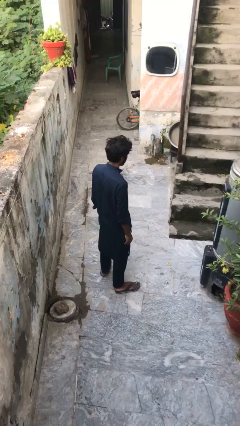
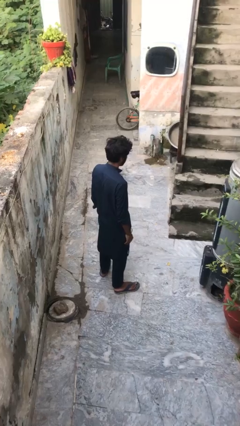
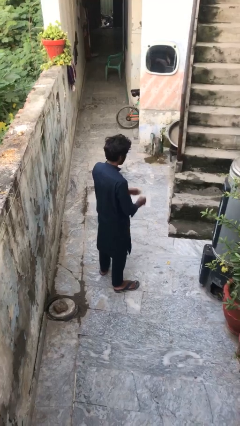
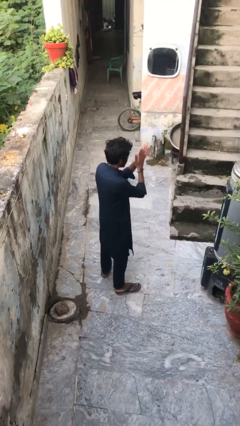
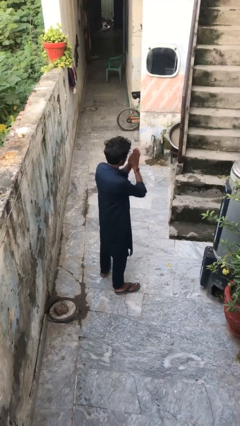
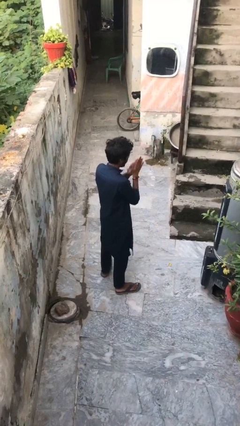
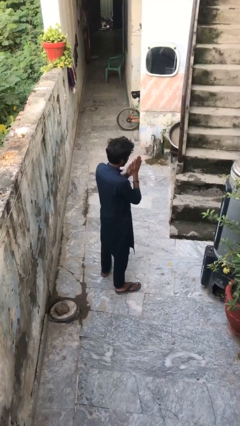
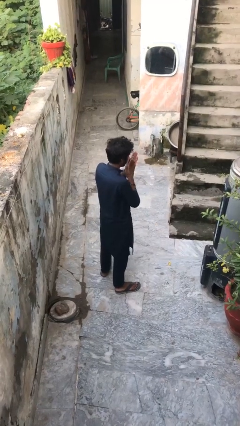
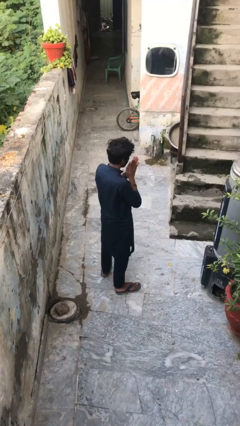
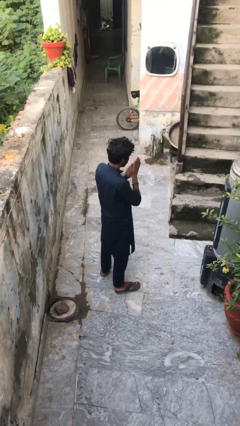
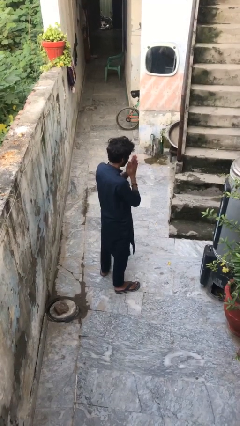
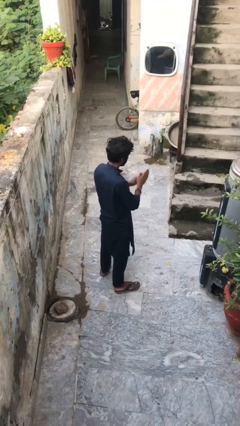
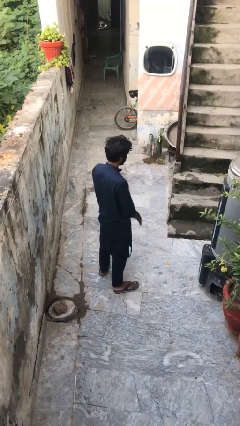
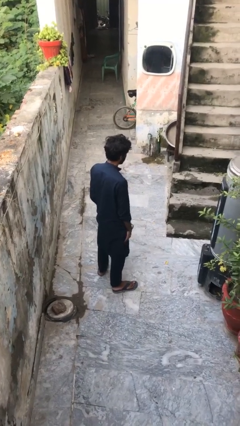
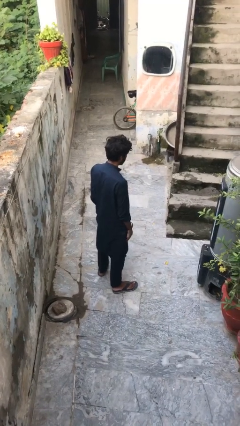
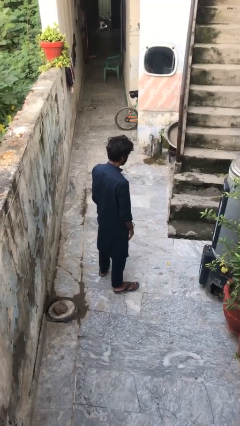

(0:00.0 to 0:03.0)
person blows into hands

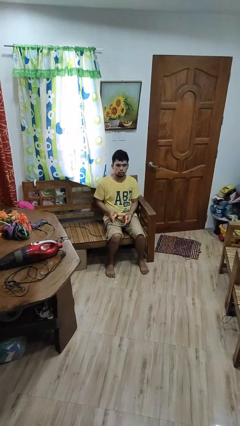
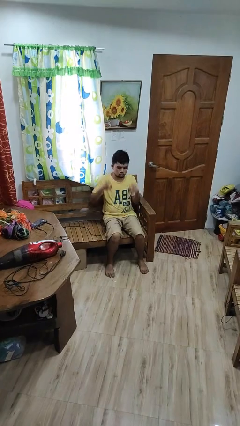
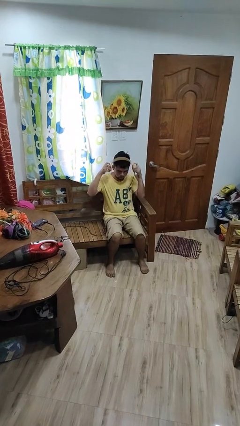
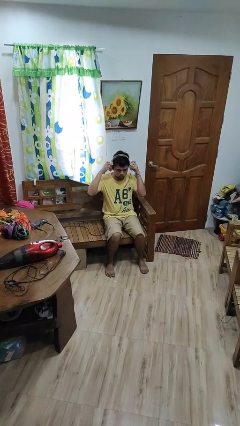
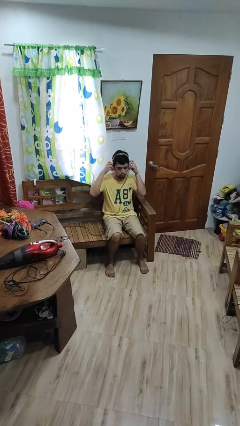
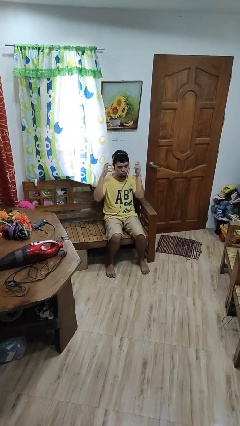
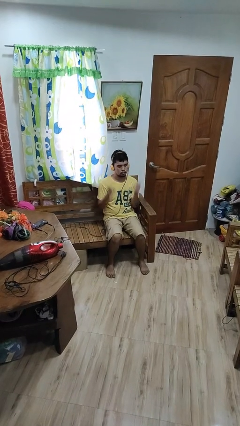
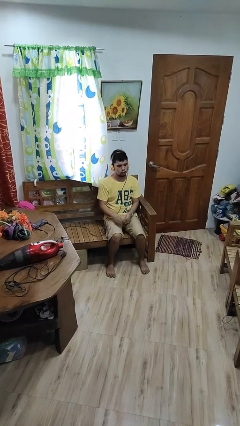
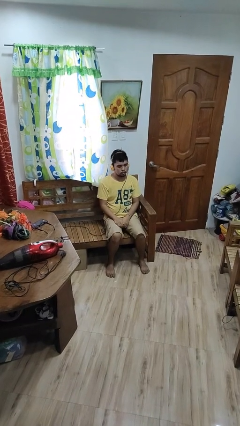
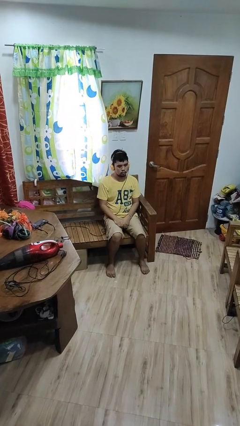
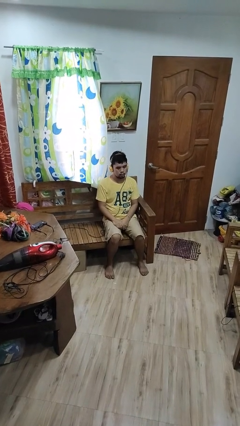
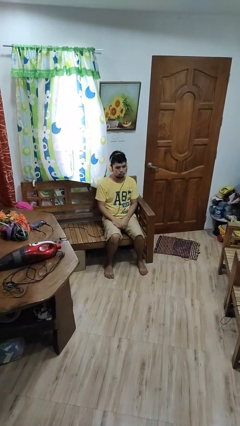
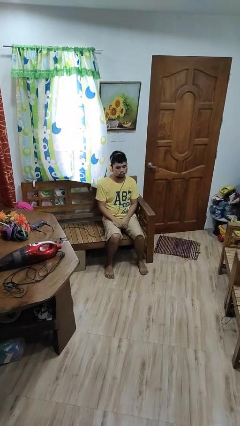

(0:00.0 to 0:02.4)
person puts on headphones

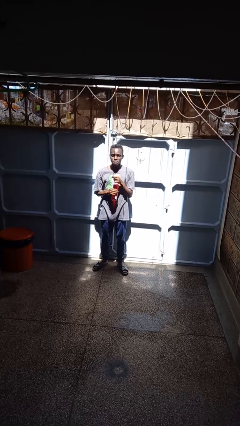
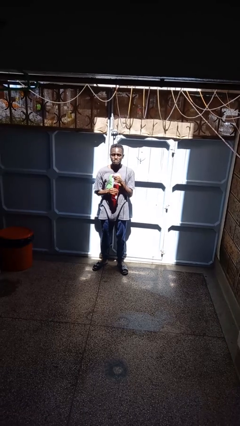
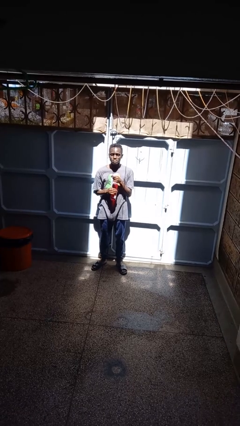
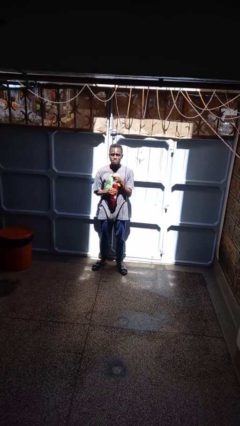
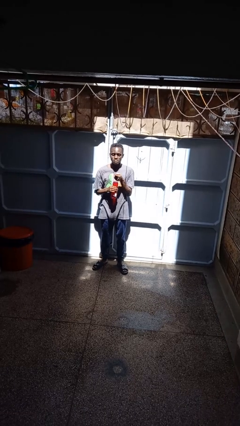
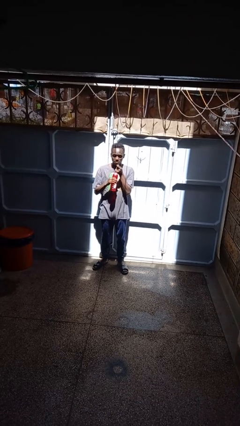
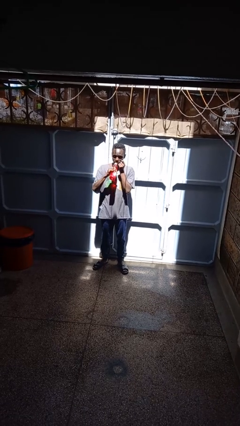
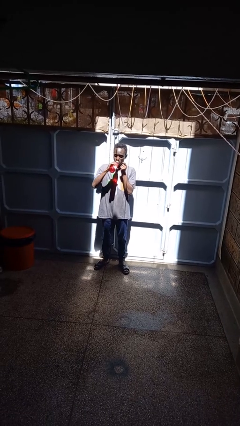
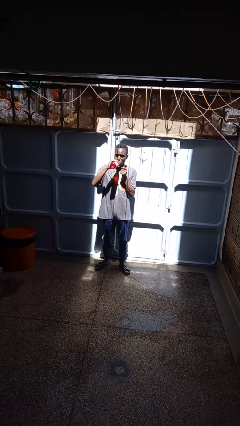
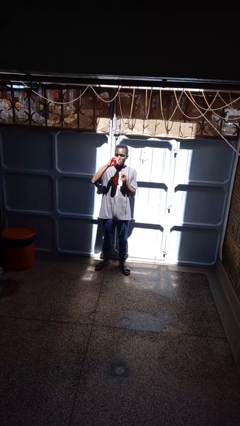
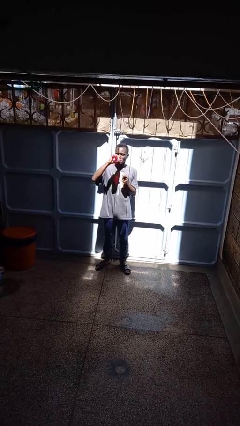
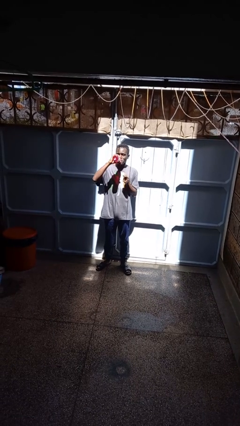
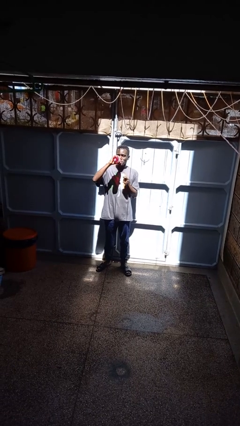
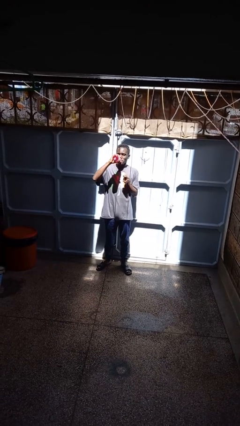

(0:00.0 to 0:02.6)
person drinks from beverage can

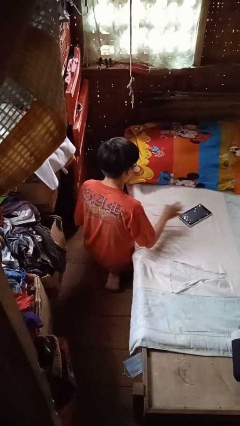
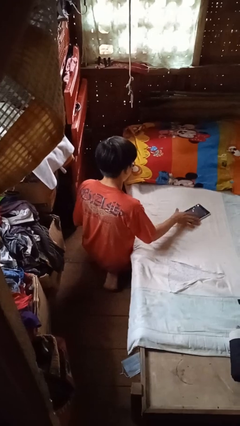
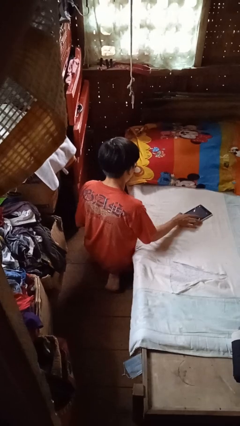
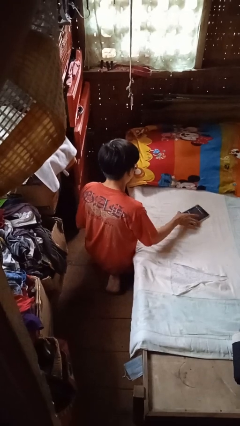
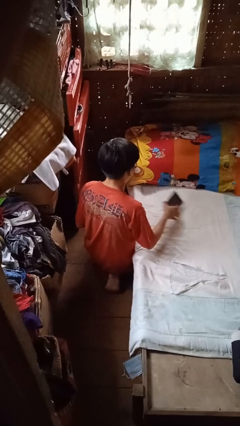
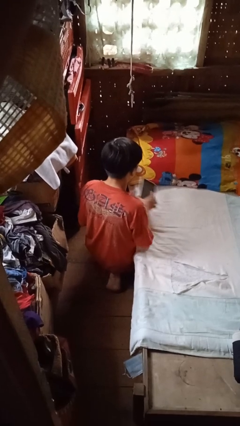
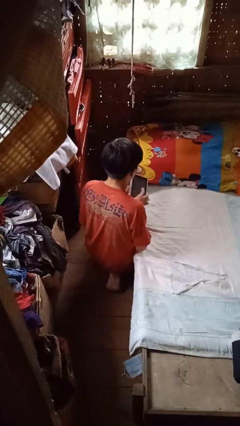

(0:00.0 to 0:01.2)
person picks up object from bed

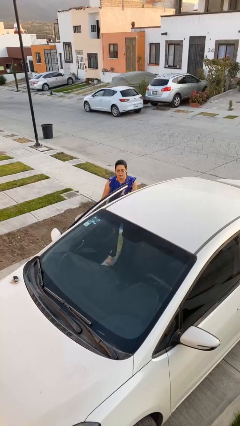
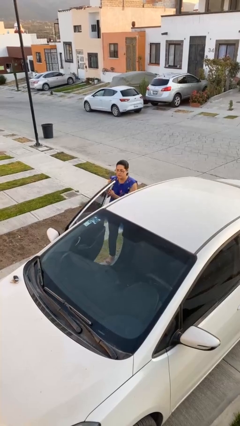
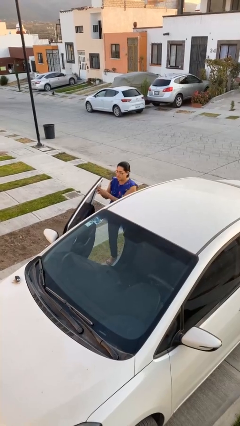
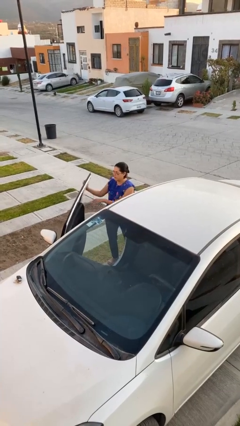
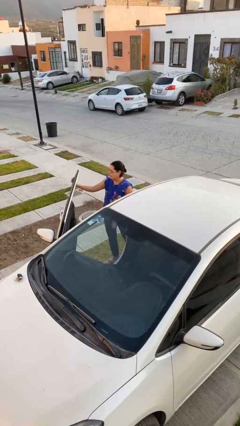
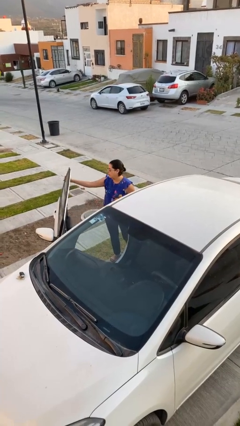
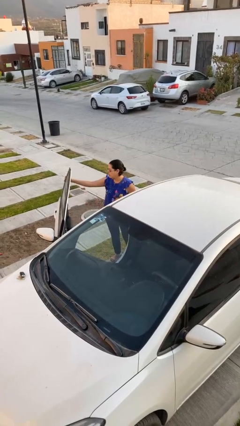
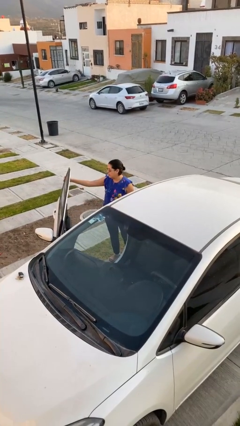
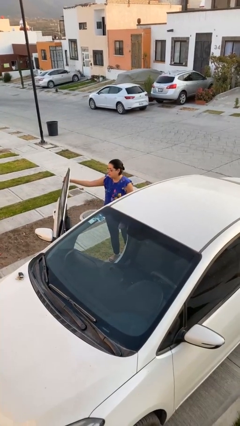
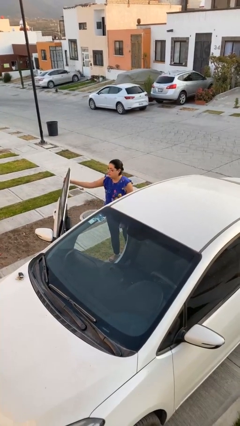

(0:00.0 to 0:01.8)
person opens car door

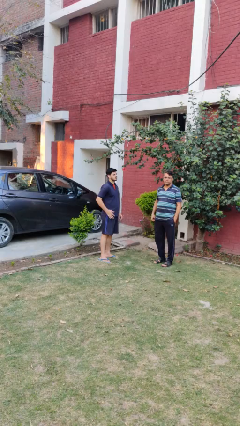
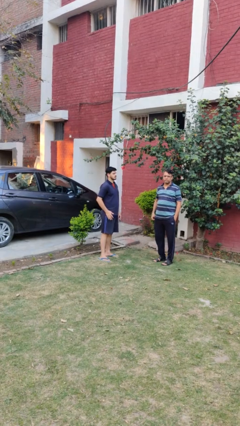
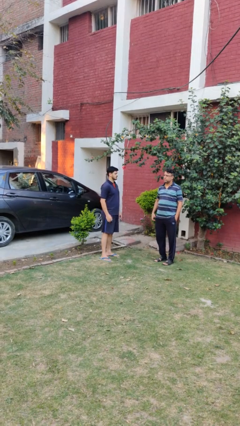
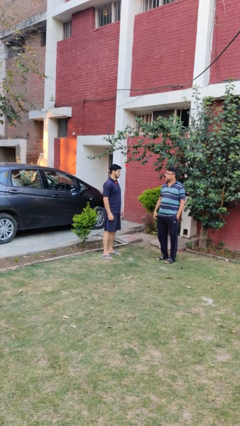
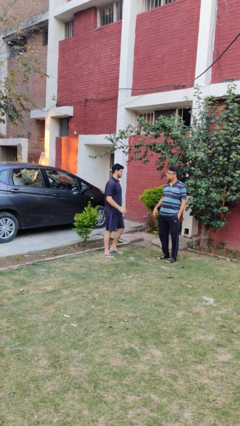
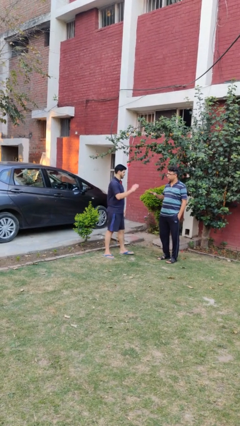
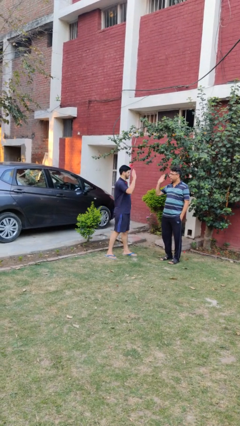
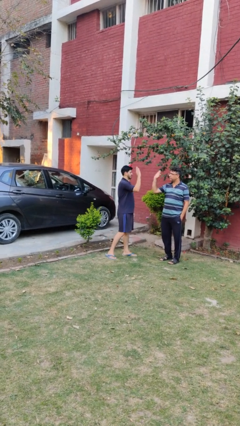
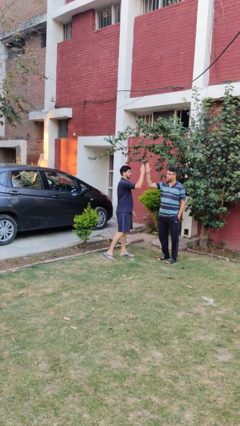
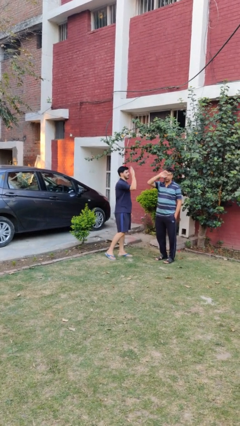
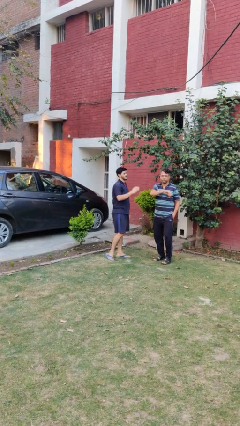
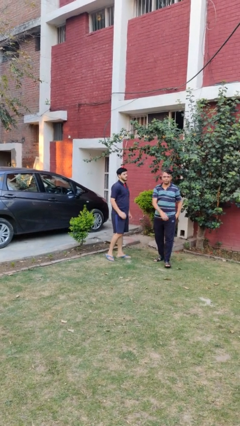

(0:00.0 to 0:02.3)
person highfives hand

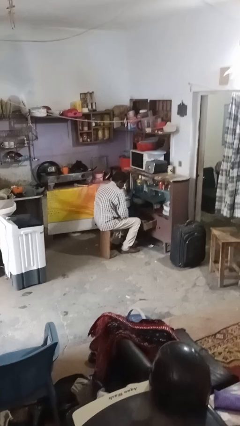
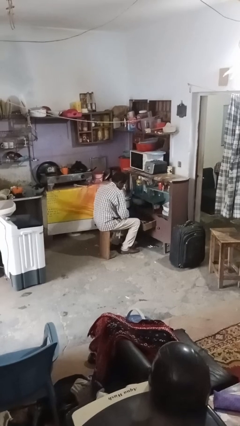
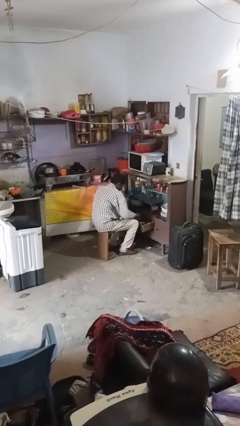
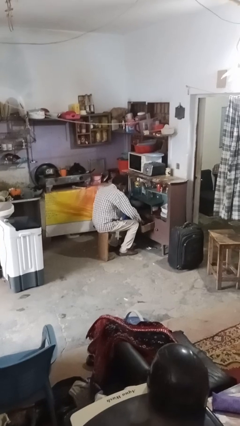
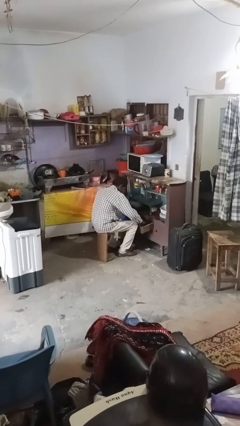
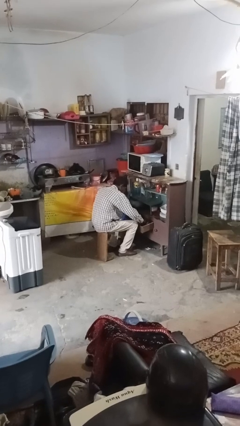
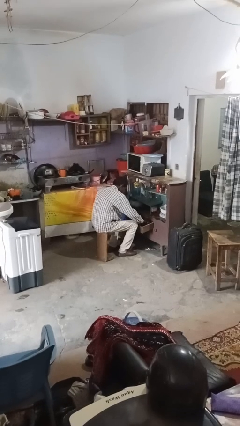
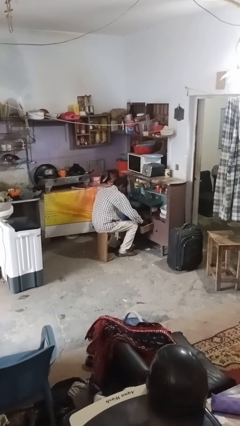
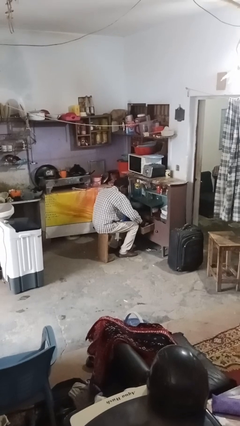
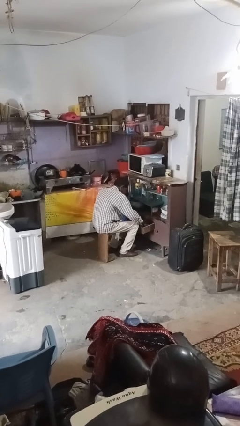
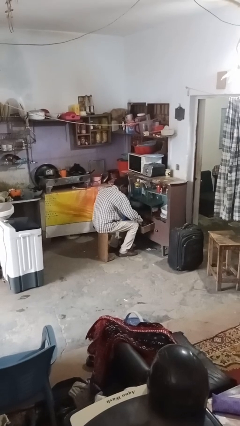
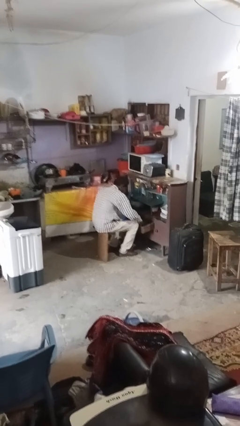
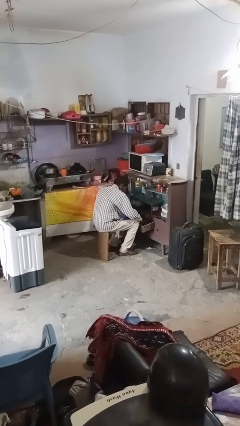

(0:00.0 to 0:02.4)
person searches in kitchen drawer

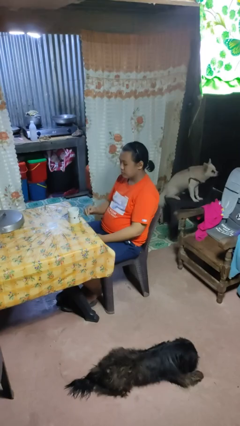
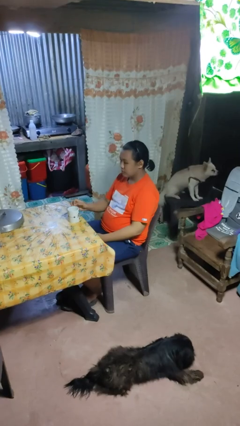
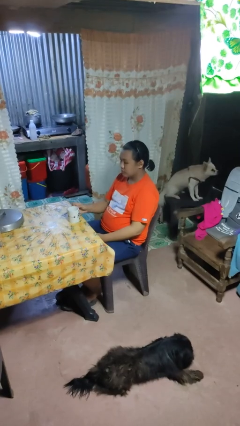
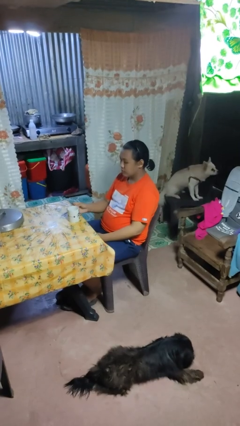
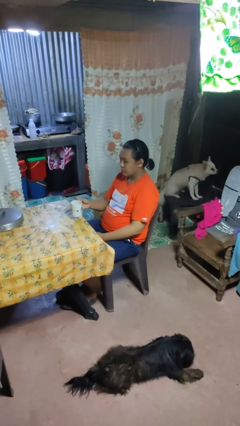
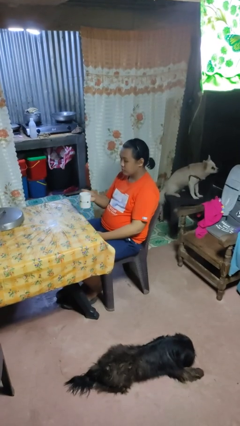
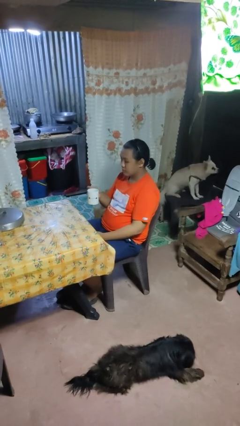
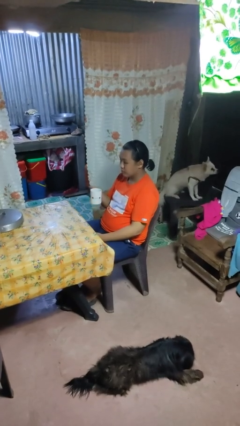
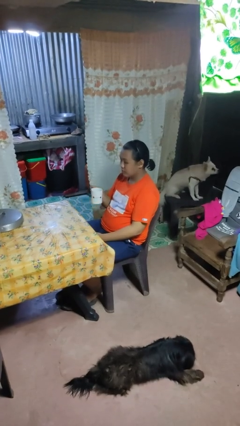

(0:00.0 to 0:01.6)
person picks up object from table
